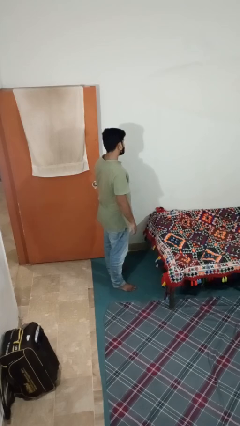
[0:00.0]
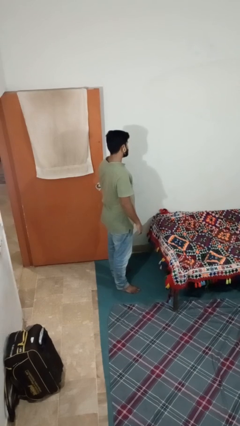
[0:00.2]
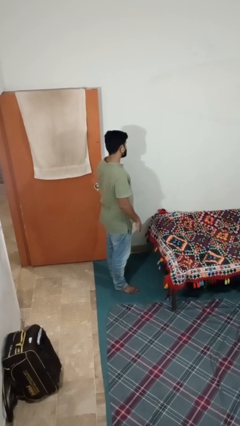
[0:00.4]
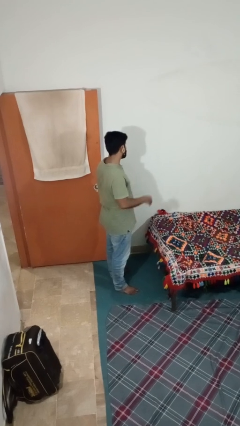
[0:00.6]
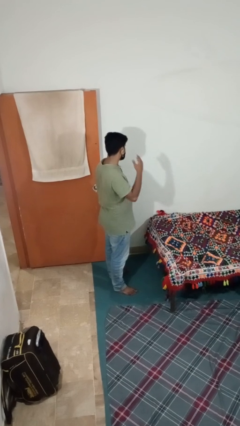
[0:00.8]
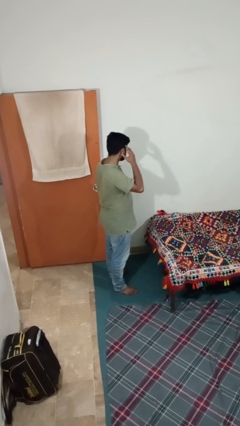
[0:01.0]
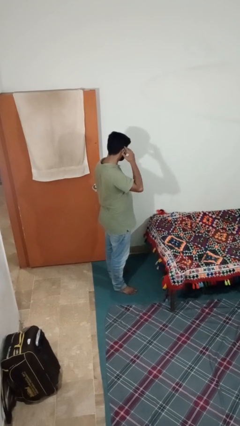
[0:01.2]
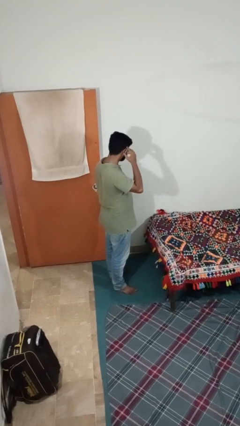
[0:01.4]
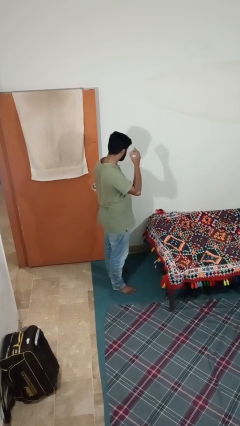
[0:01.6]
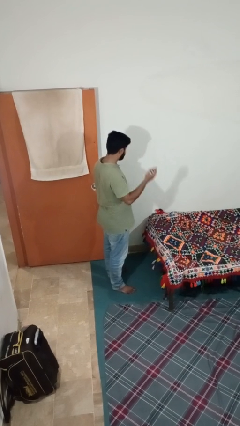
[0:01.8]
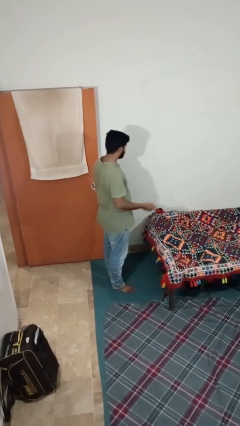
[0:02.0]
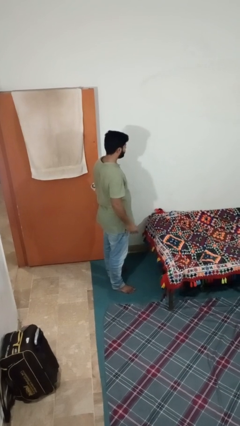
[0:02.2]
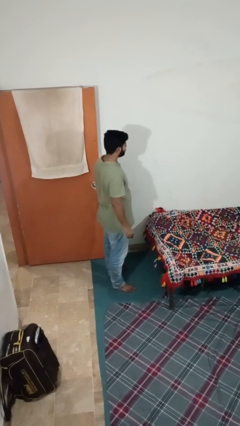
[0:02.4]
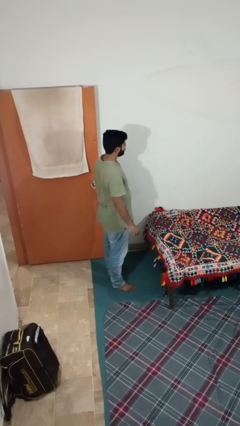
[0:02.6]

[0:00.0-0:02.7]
person takes off earrings

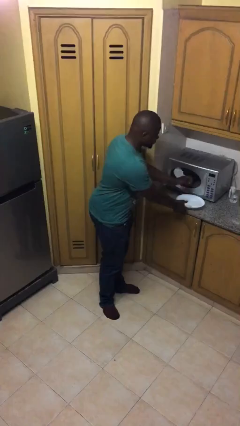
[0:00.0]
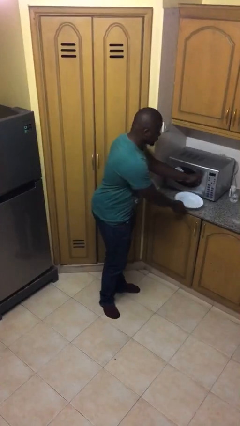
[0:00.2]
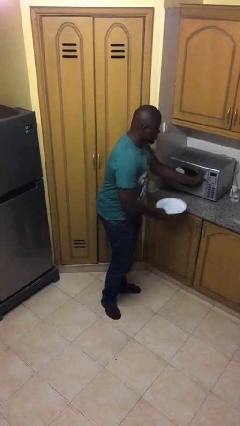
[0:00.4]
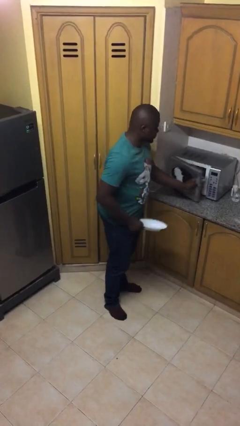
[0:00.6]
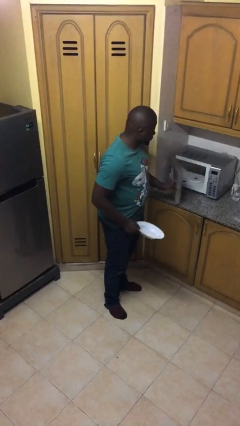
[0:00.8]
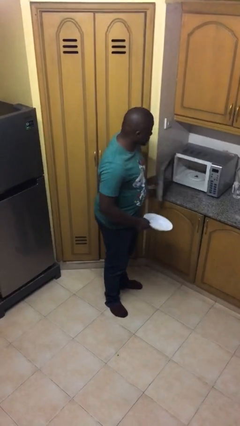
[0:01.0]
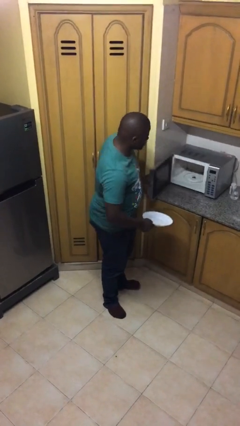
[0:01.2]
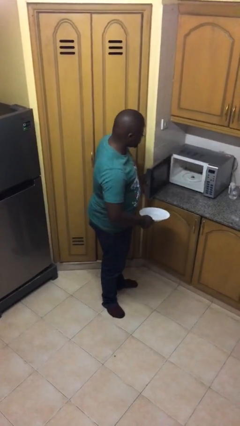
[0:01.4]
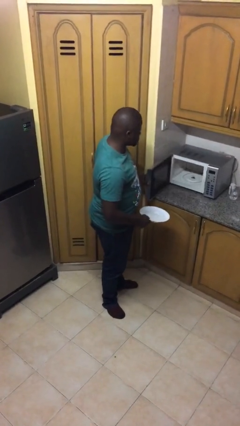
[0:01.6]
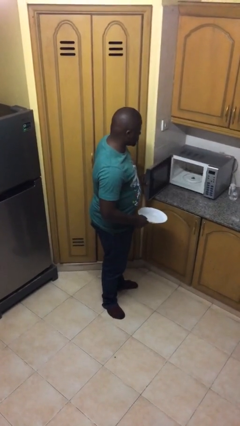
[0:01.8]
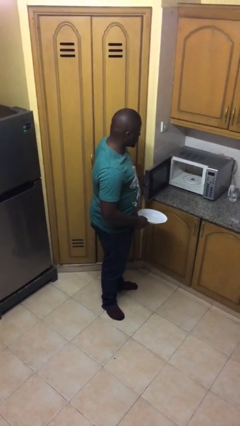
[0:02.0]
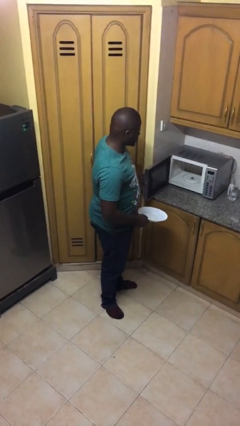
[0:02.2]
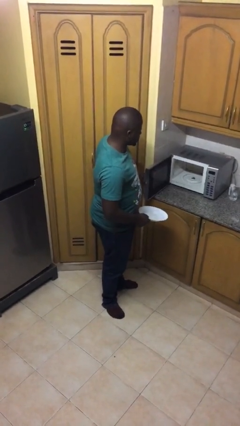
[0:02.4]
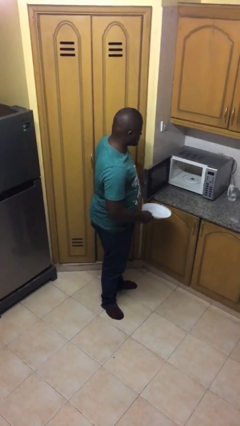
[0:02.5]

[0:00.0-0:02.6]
person opens microwave

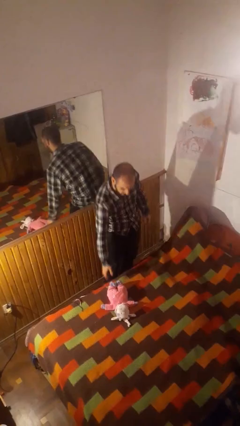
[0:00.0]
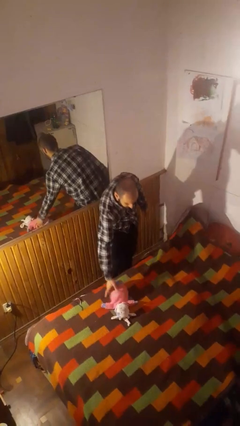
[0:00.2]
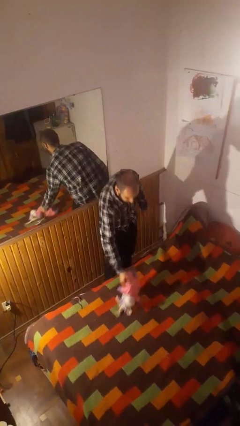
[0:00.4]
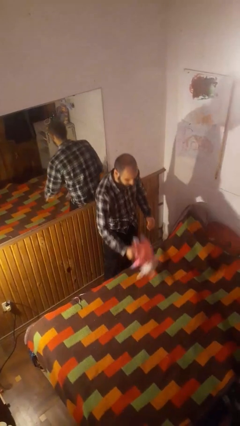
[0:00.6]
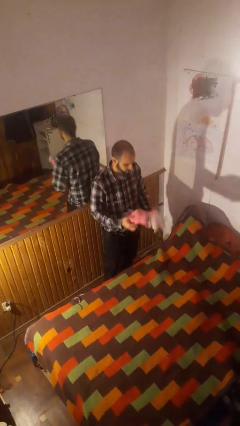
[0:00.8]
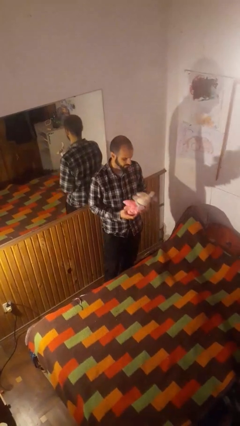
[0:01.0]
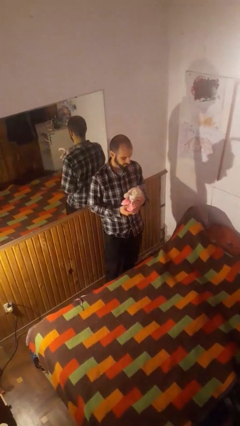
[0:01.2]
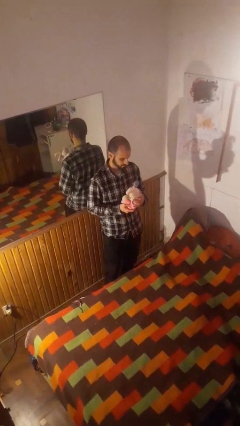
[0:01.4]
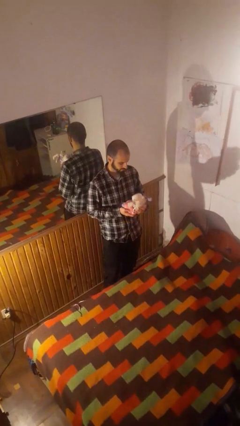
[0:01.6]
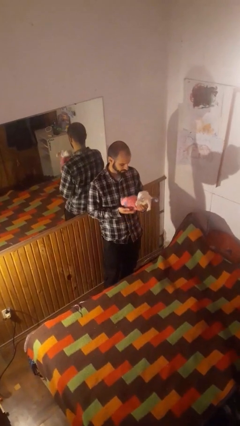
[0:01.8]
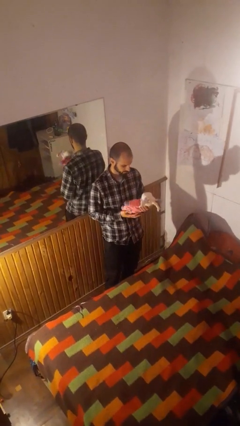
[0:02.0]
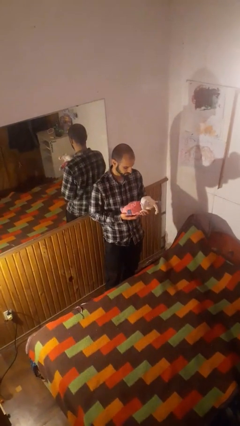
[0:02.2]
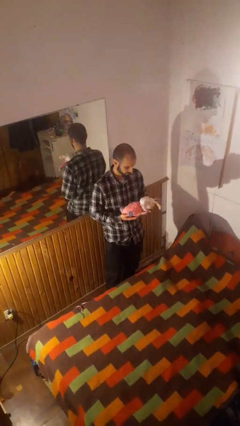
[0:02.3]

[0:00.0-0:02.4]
person picks up object from bed

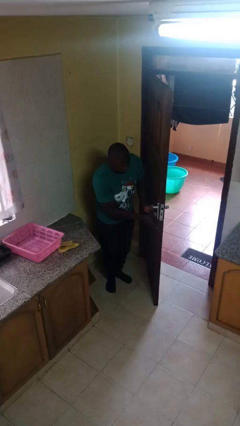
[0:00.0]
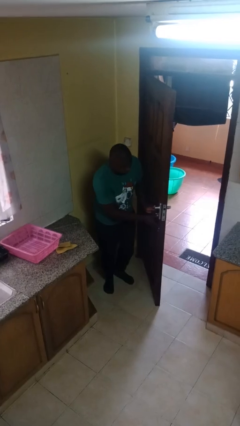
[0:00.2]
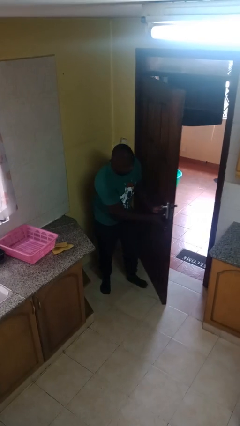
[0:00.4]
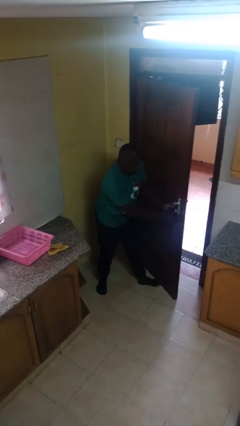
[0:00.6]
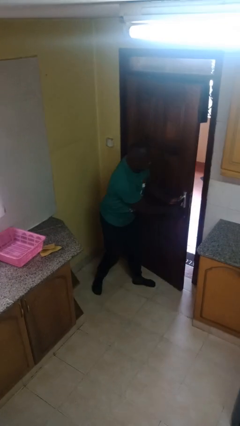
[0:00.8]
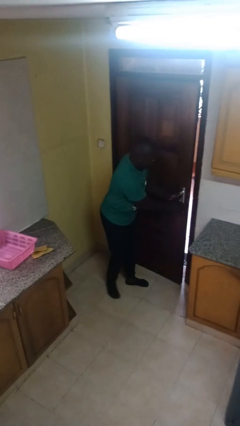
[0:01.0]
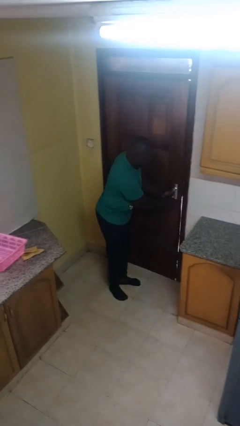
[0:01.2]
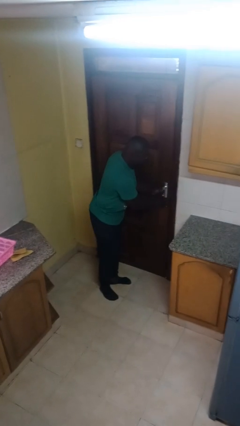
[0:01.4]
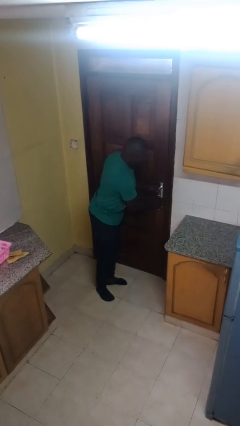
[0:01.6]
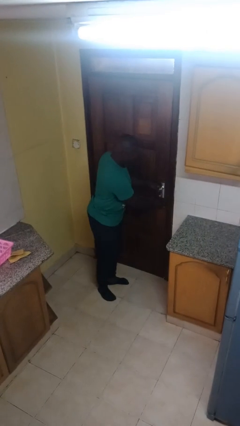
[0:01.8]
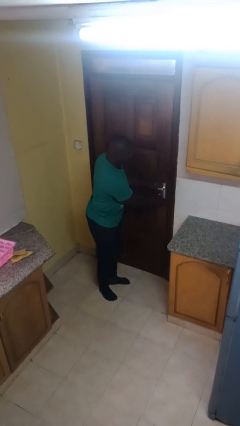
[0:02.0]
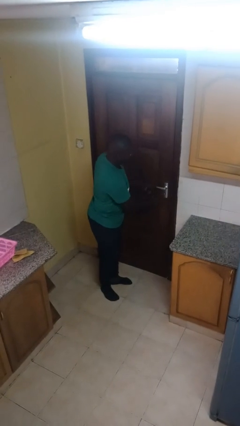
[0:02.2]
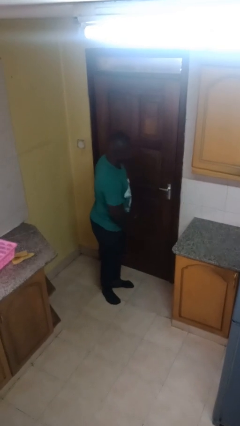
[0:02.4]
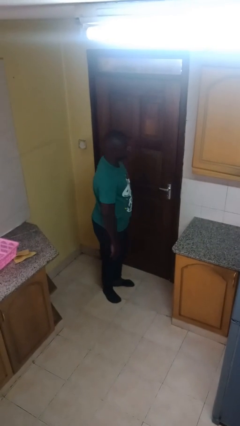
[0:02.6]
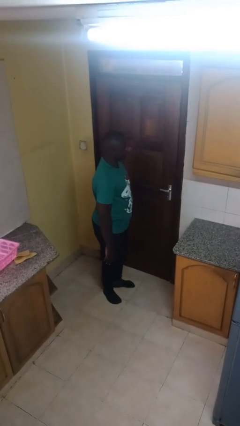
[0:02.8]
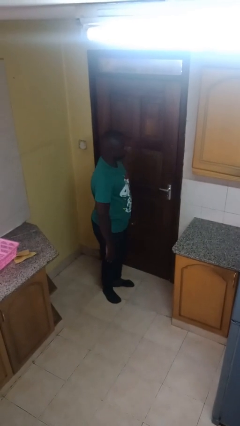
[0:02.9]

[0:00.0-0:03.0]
person closes facility door

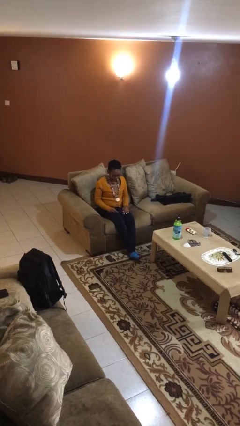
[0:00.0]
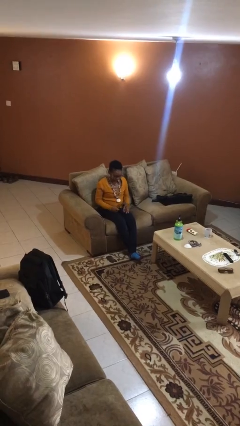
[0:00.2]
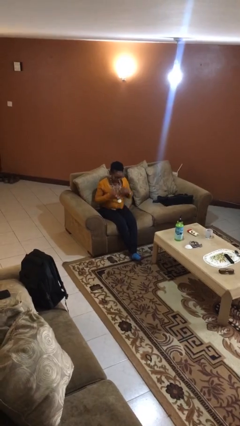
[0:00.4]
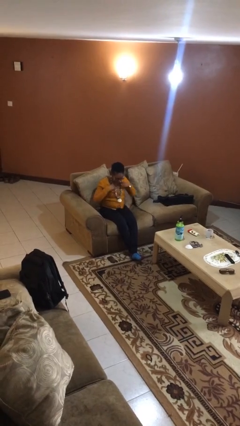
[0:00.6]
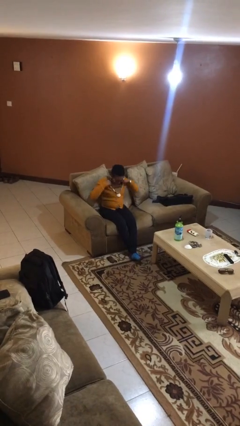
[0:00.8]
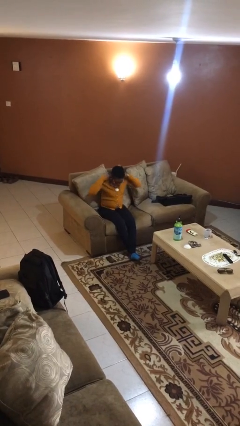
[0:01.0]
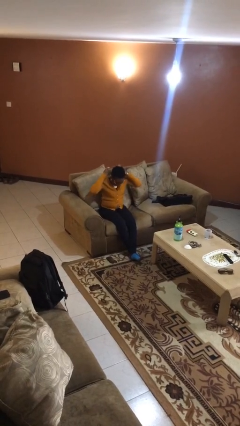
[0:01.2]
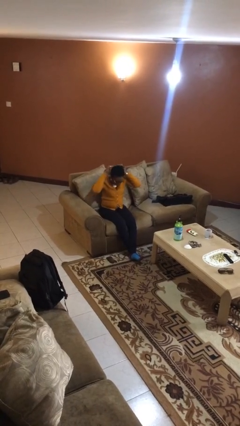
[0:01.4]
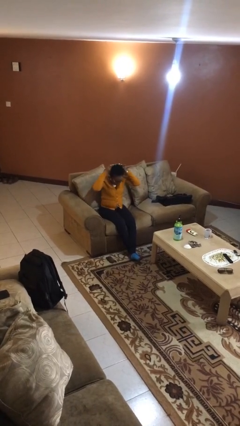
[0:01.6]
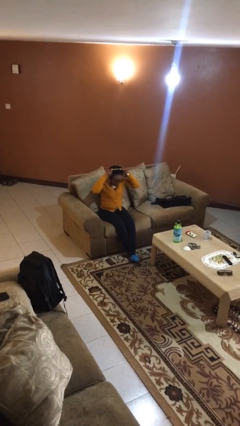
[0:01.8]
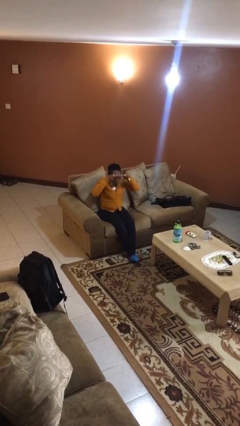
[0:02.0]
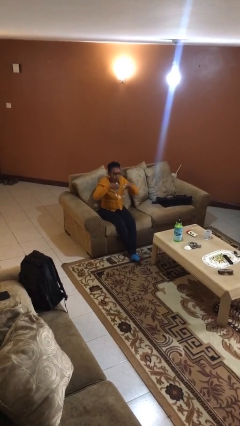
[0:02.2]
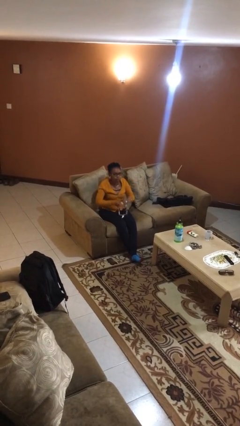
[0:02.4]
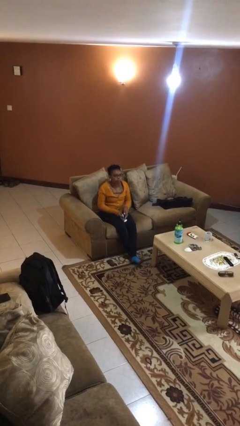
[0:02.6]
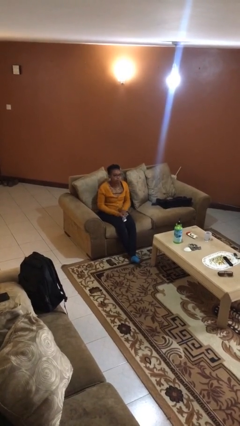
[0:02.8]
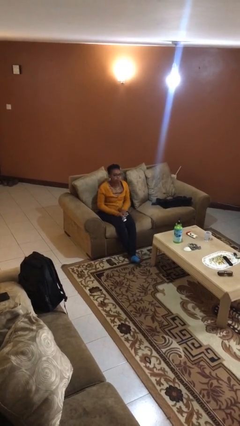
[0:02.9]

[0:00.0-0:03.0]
person takes off necklace

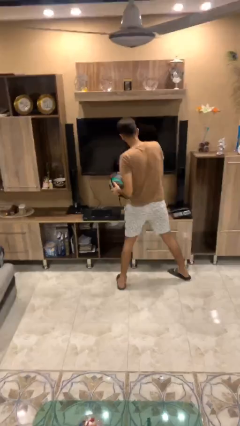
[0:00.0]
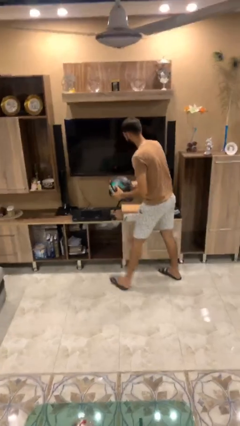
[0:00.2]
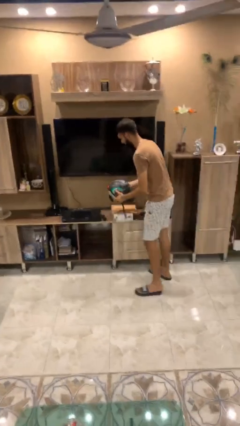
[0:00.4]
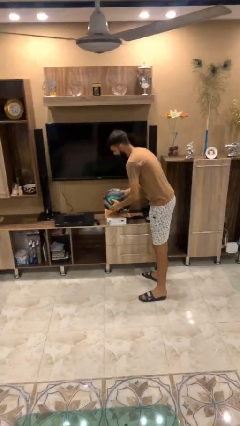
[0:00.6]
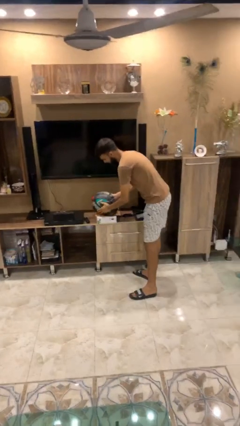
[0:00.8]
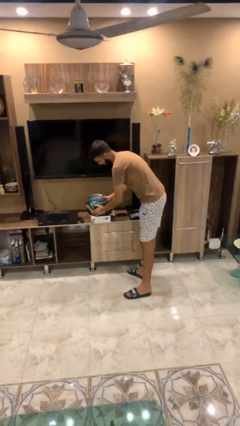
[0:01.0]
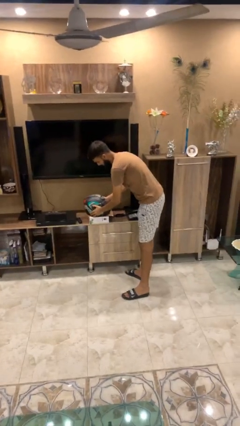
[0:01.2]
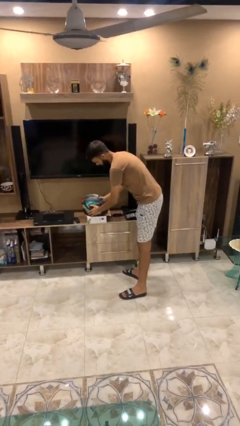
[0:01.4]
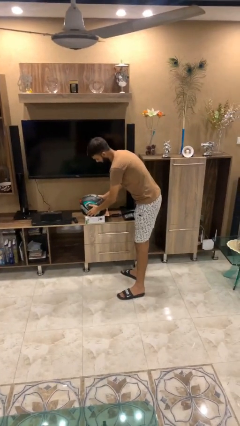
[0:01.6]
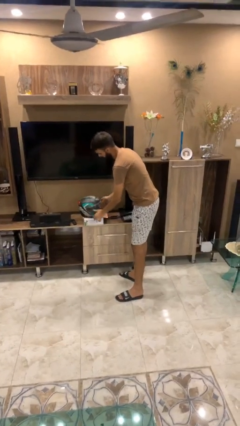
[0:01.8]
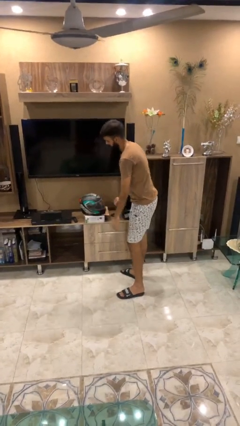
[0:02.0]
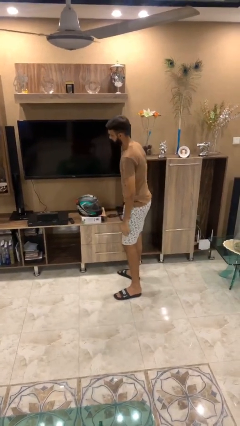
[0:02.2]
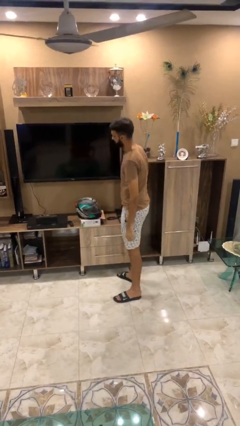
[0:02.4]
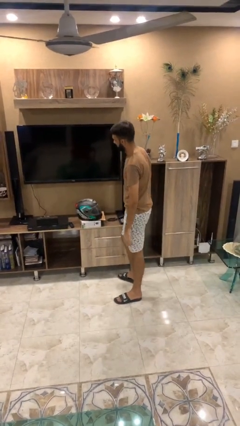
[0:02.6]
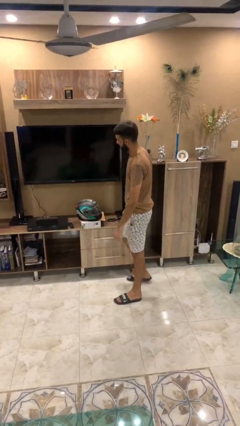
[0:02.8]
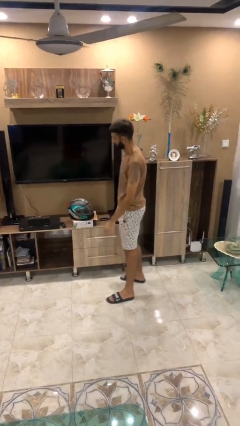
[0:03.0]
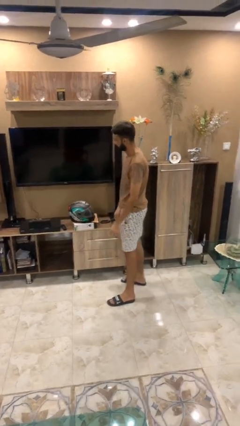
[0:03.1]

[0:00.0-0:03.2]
person puts down object on table

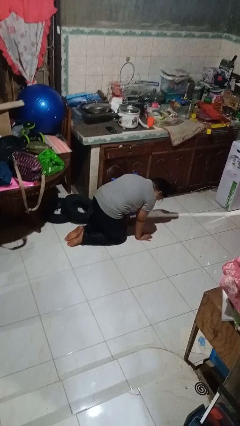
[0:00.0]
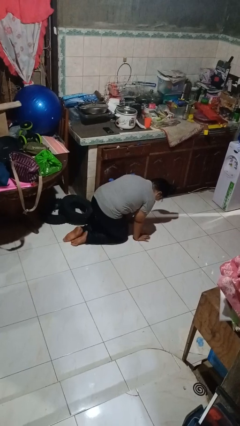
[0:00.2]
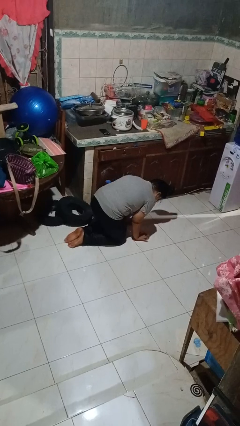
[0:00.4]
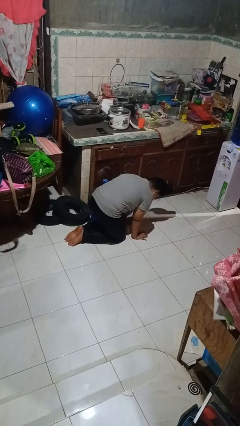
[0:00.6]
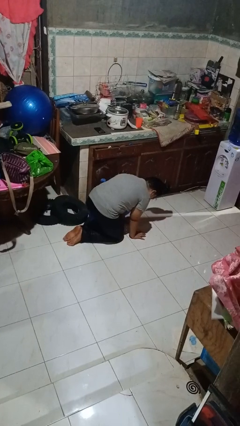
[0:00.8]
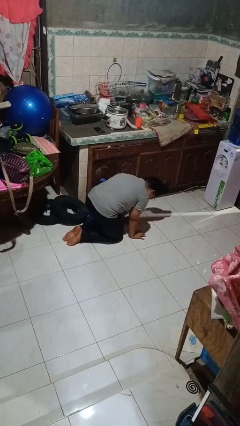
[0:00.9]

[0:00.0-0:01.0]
person crawls
